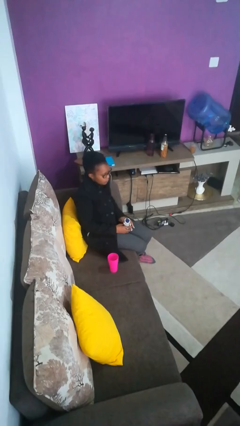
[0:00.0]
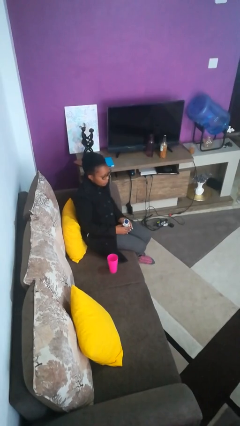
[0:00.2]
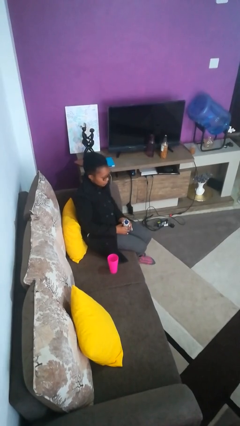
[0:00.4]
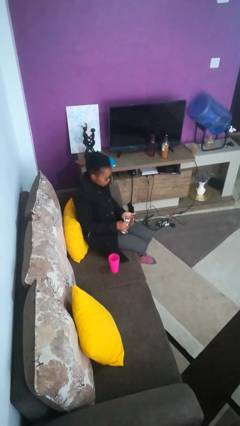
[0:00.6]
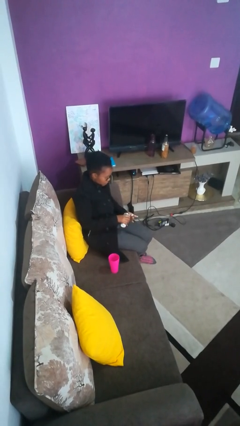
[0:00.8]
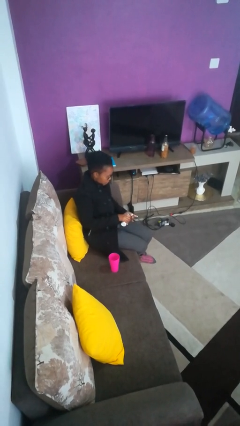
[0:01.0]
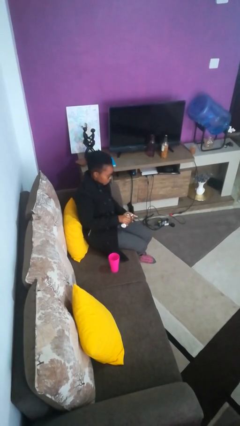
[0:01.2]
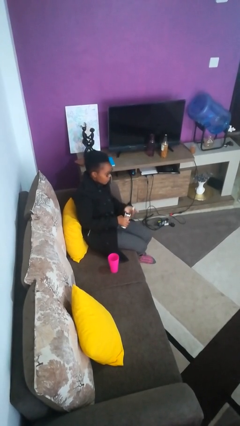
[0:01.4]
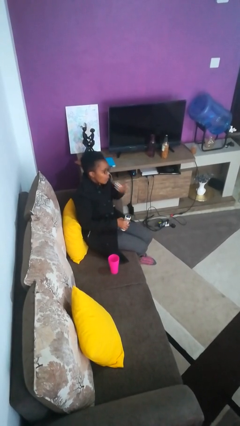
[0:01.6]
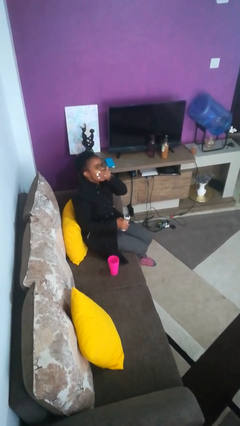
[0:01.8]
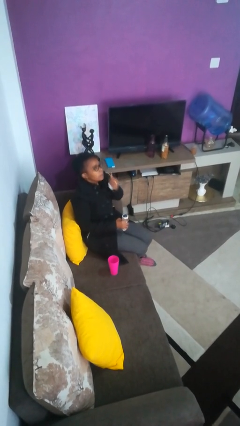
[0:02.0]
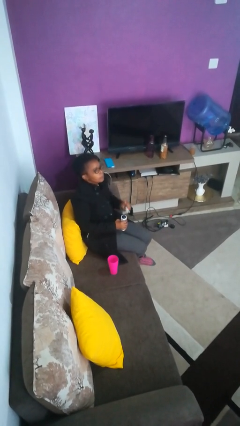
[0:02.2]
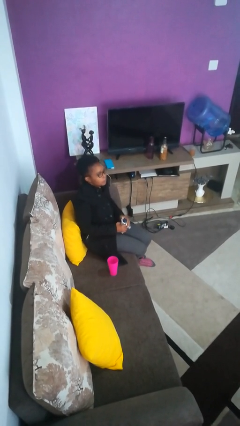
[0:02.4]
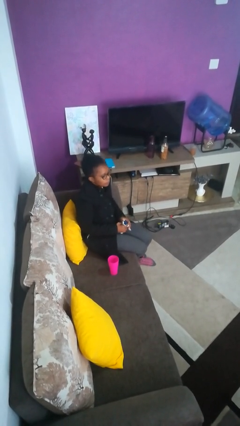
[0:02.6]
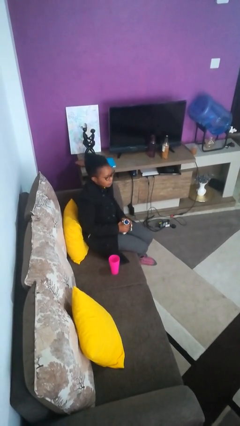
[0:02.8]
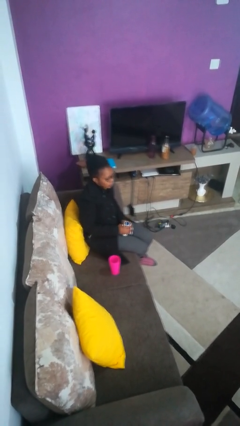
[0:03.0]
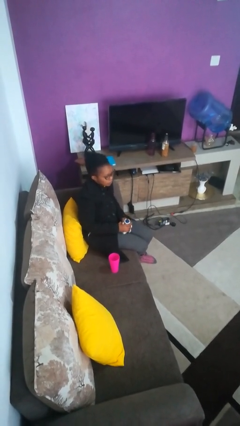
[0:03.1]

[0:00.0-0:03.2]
person takes medicine pills

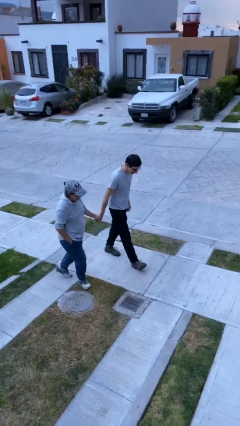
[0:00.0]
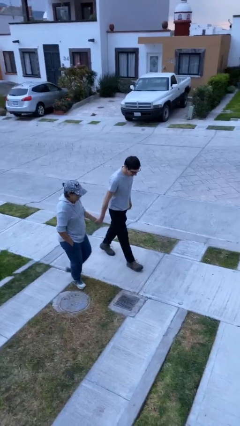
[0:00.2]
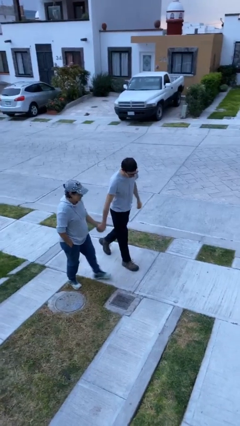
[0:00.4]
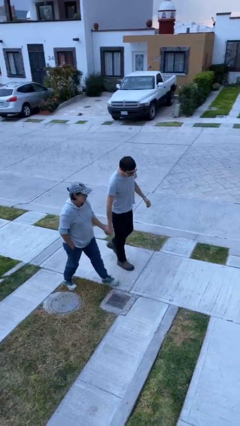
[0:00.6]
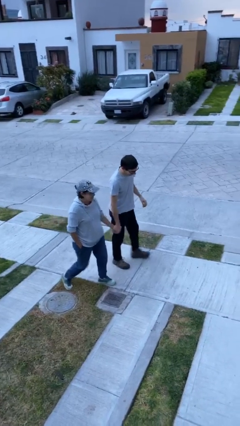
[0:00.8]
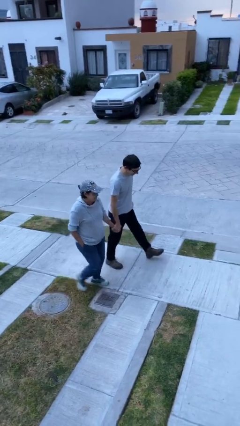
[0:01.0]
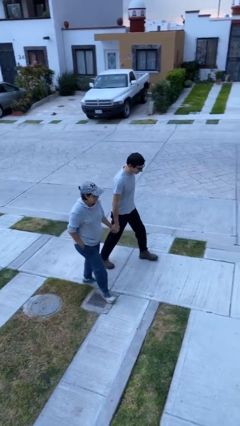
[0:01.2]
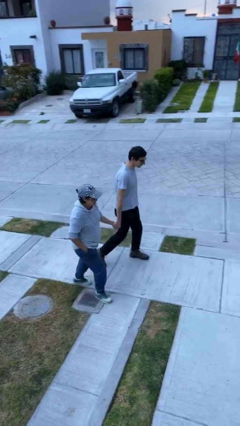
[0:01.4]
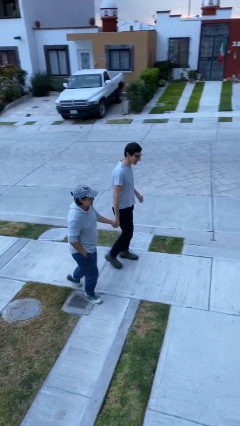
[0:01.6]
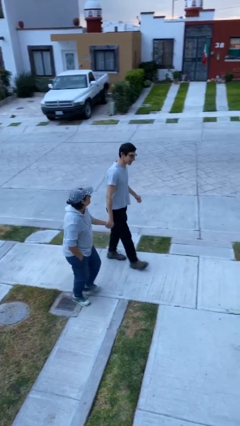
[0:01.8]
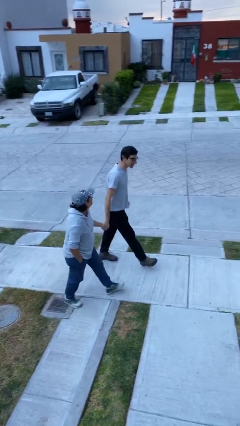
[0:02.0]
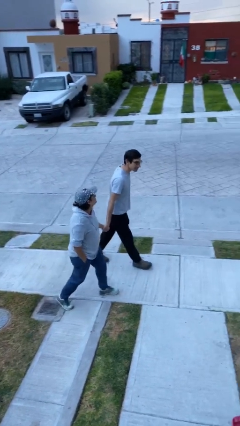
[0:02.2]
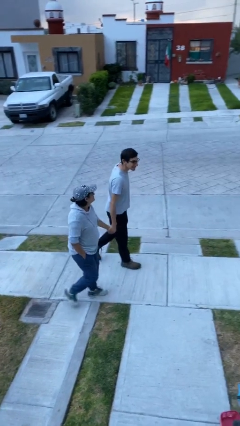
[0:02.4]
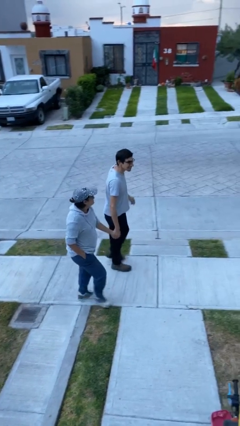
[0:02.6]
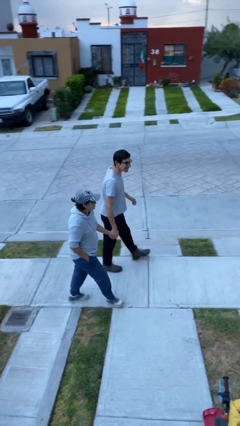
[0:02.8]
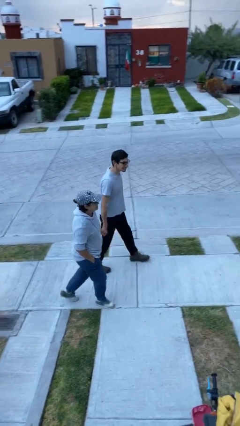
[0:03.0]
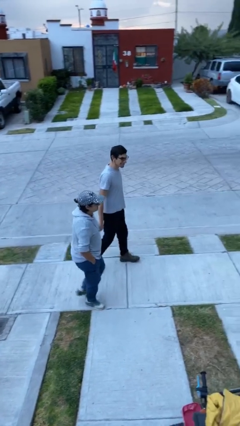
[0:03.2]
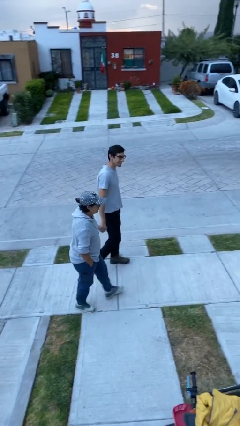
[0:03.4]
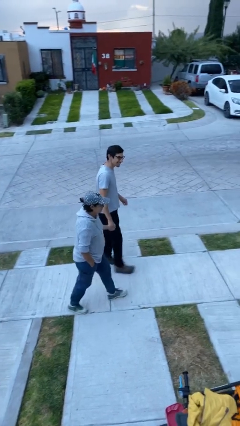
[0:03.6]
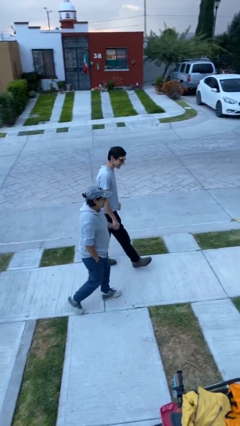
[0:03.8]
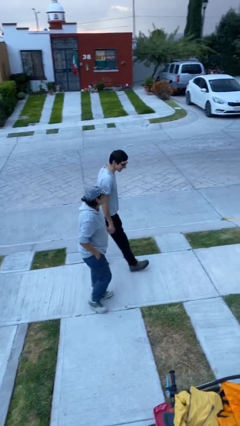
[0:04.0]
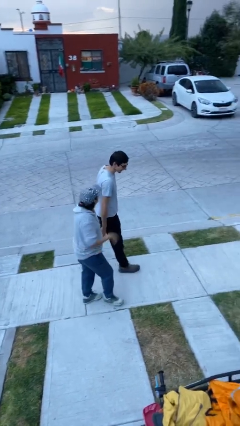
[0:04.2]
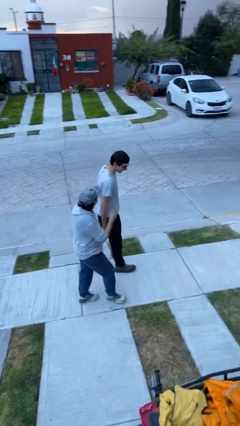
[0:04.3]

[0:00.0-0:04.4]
person holds hand

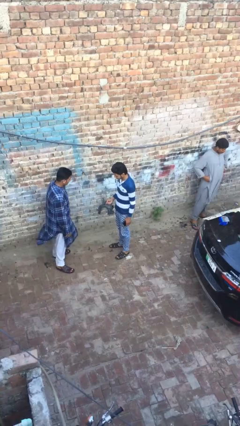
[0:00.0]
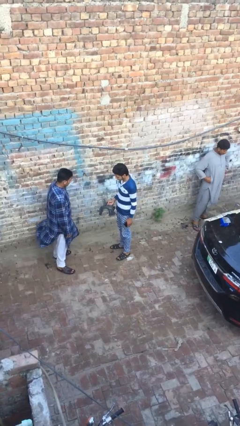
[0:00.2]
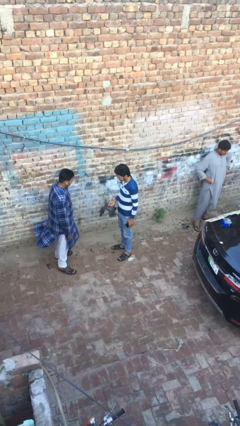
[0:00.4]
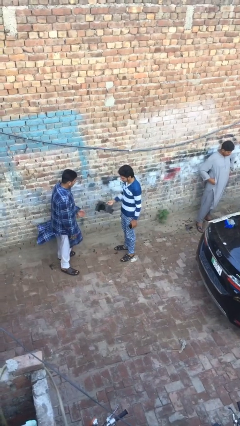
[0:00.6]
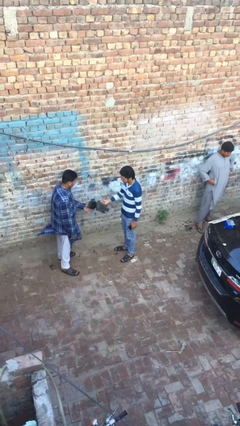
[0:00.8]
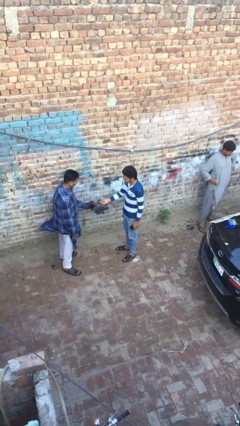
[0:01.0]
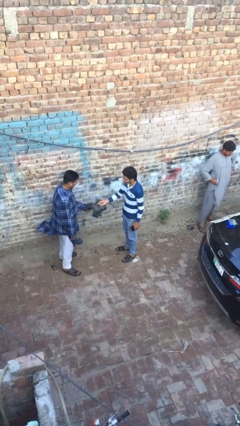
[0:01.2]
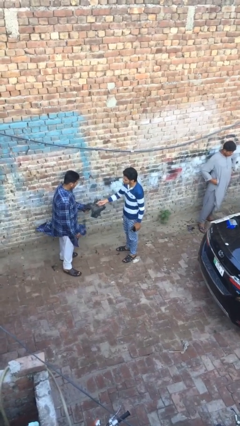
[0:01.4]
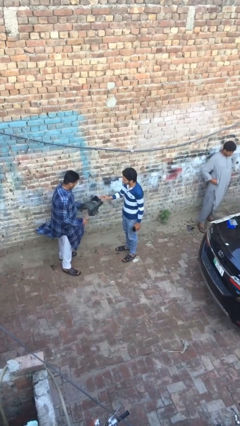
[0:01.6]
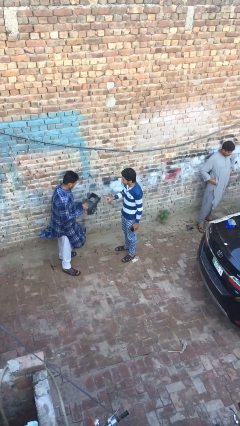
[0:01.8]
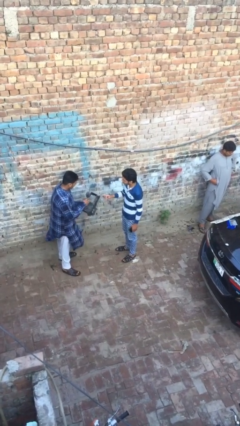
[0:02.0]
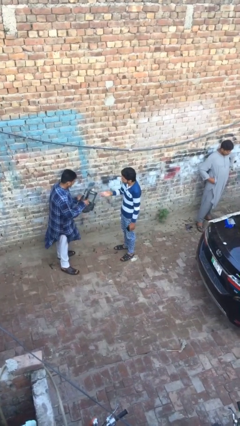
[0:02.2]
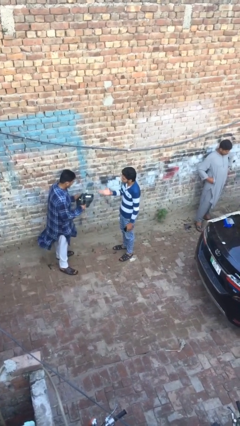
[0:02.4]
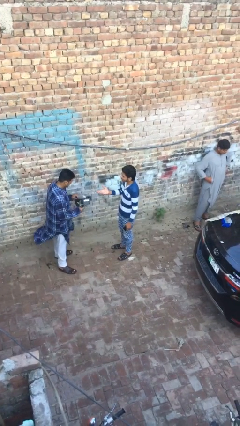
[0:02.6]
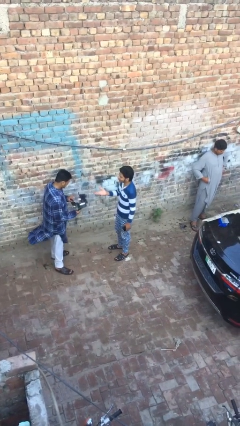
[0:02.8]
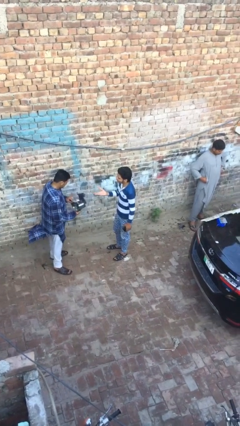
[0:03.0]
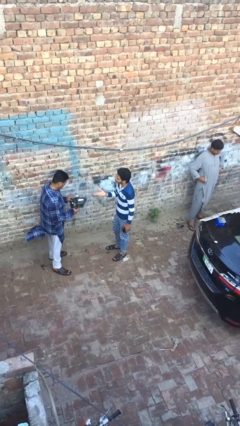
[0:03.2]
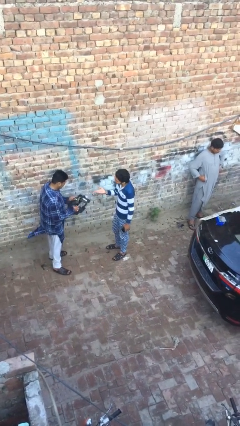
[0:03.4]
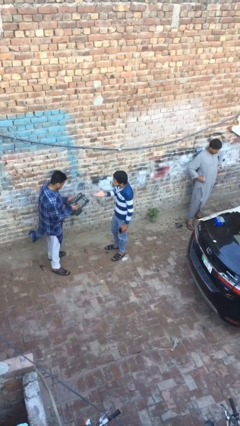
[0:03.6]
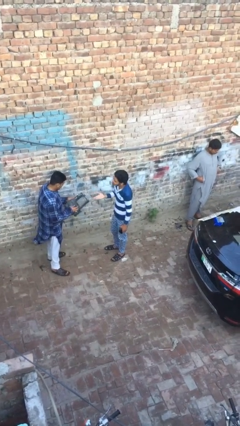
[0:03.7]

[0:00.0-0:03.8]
person transfers object to person

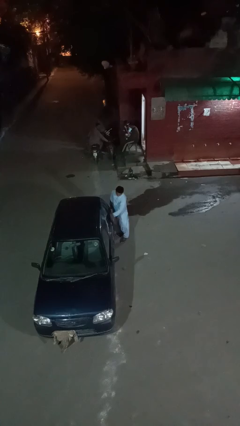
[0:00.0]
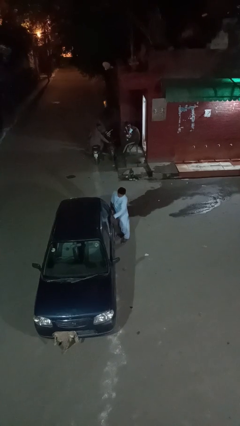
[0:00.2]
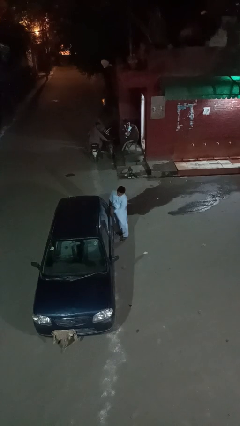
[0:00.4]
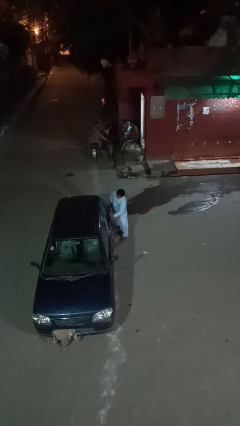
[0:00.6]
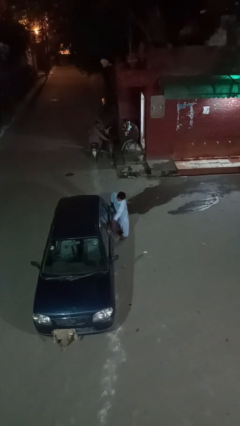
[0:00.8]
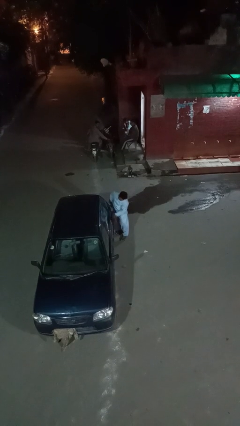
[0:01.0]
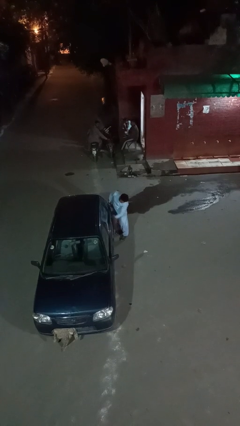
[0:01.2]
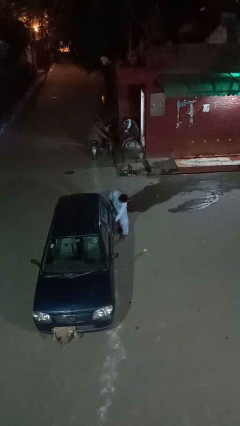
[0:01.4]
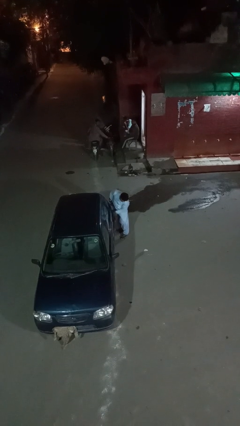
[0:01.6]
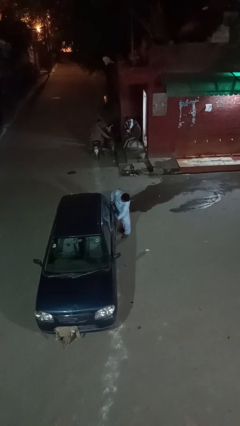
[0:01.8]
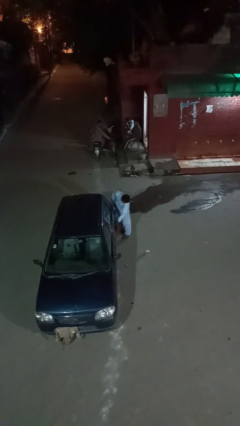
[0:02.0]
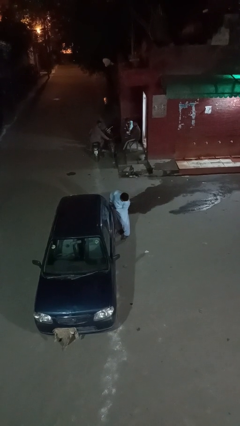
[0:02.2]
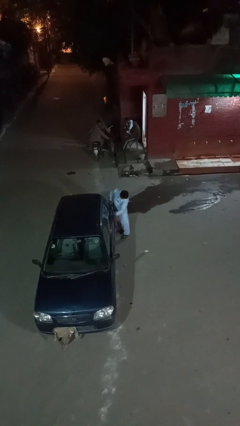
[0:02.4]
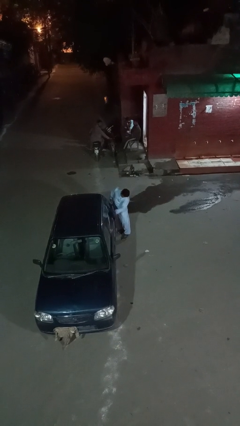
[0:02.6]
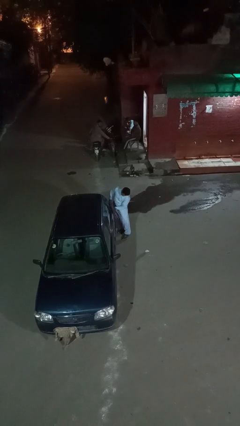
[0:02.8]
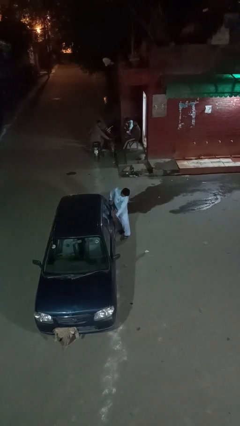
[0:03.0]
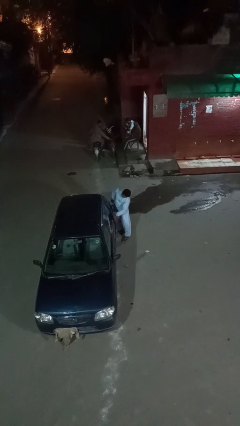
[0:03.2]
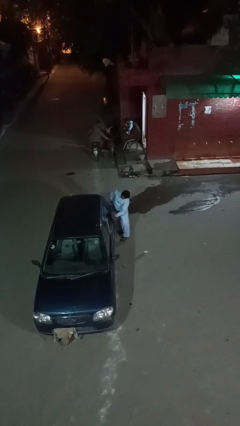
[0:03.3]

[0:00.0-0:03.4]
person polishes car with rag

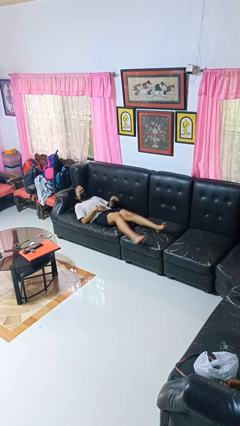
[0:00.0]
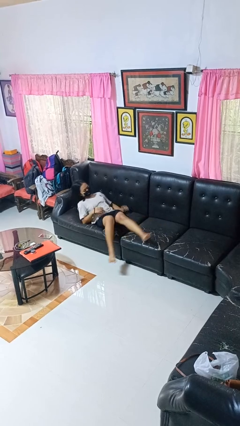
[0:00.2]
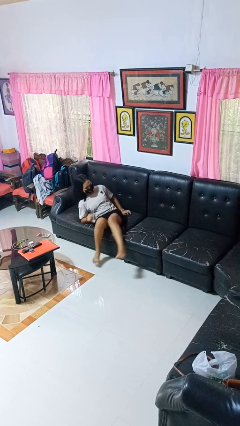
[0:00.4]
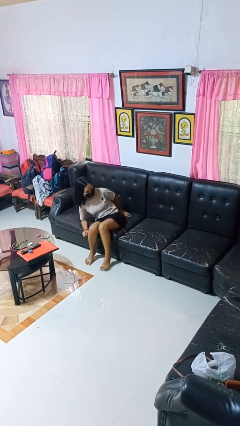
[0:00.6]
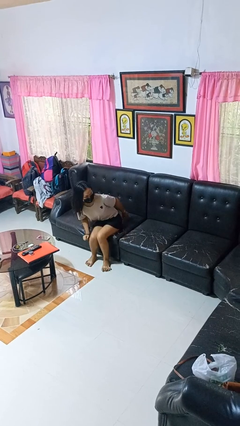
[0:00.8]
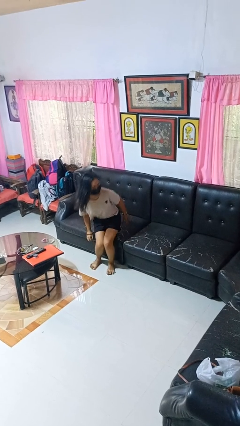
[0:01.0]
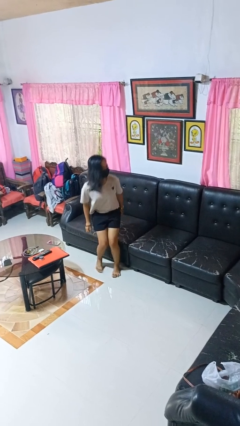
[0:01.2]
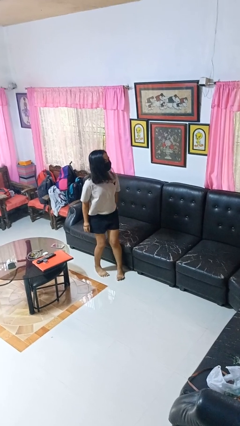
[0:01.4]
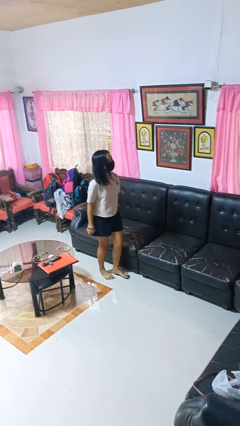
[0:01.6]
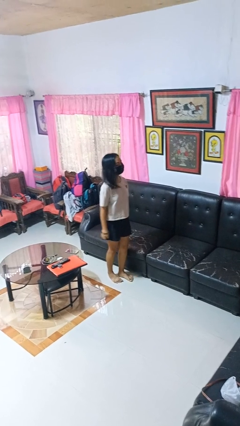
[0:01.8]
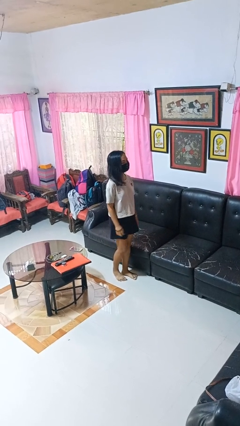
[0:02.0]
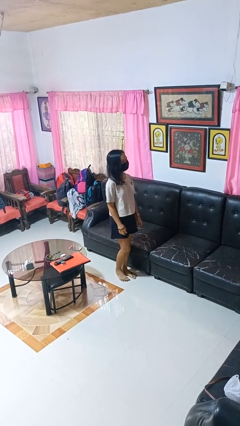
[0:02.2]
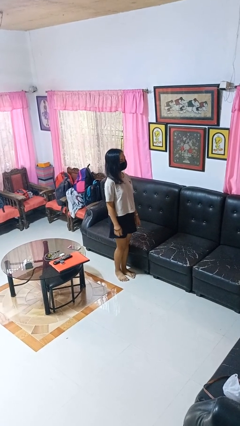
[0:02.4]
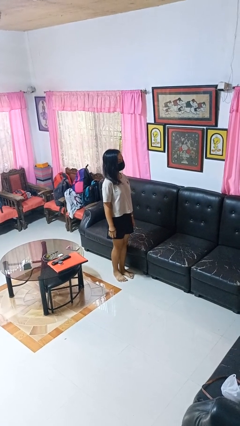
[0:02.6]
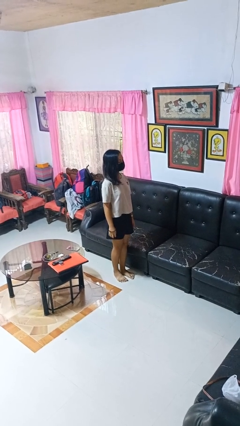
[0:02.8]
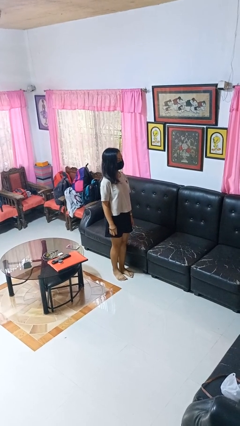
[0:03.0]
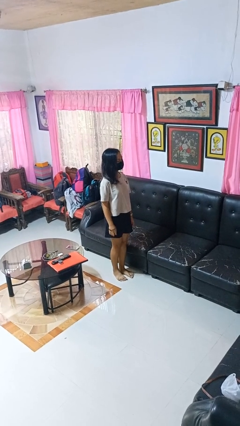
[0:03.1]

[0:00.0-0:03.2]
person stands up
